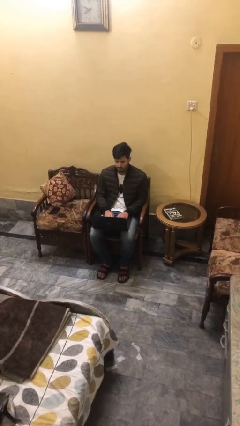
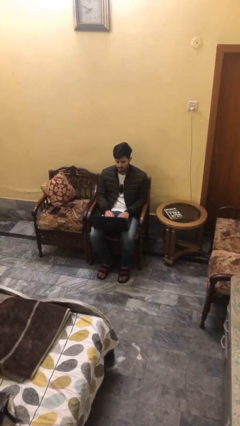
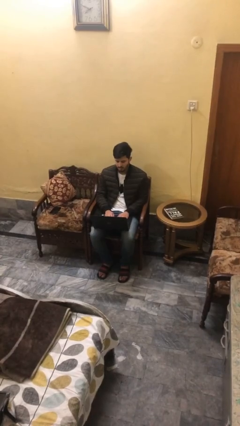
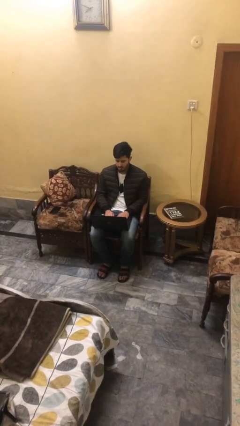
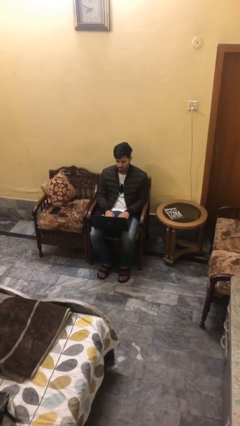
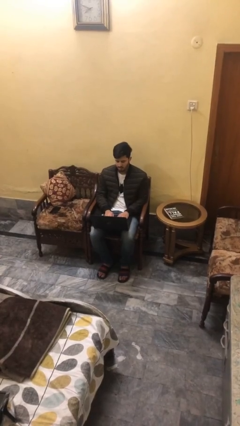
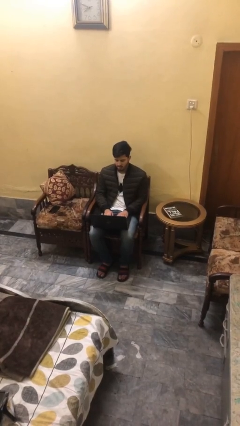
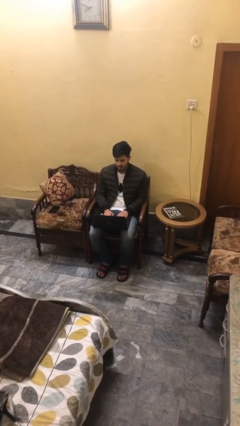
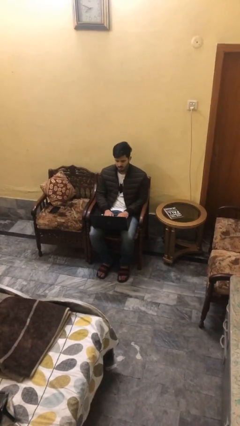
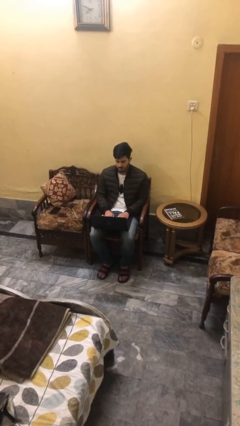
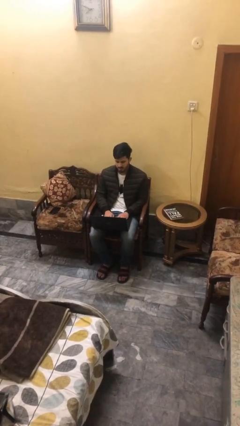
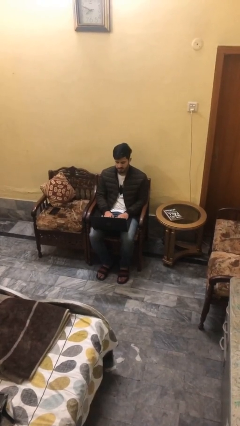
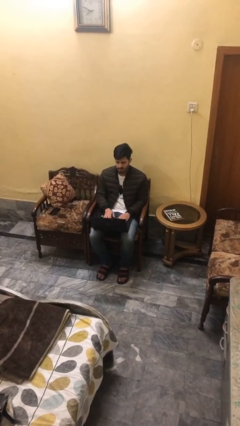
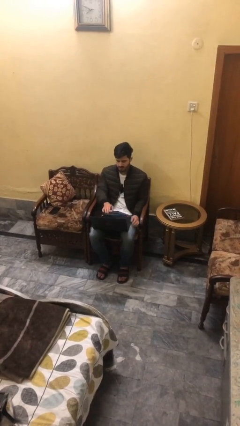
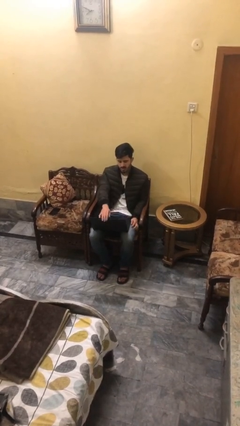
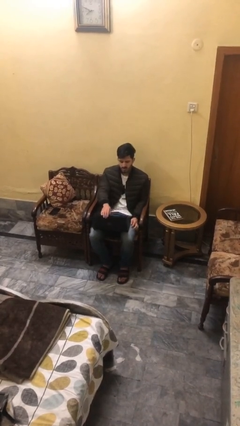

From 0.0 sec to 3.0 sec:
person interacts with laptop

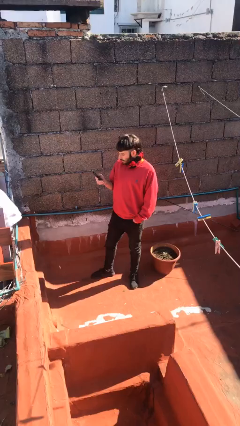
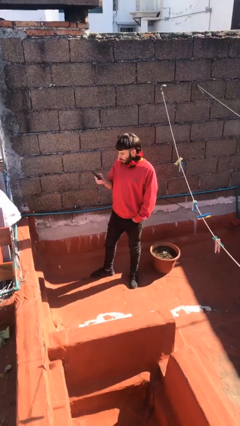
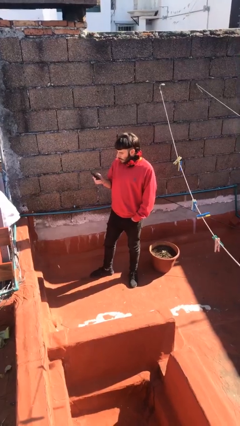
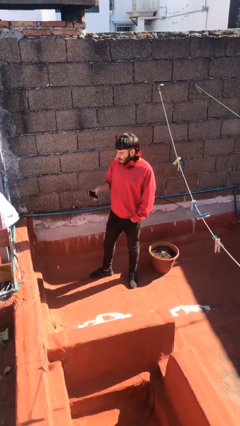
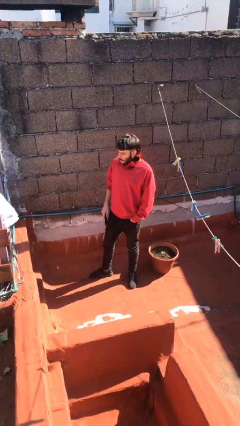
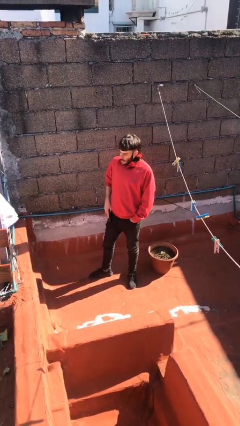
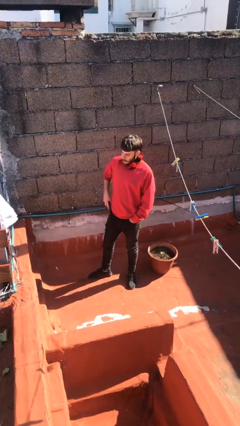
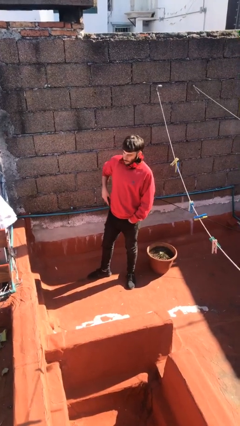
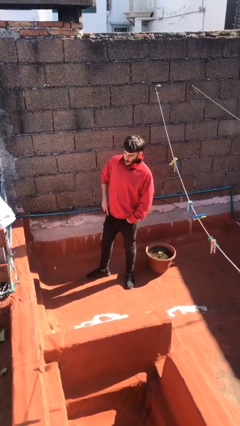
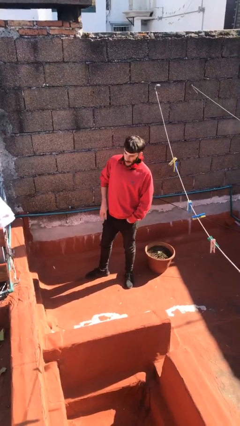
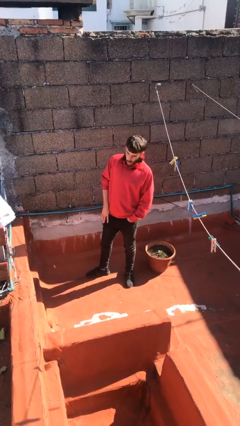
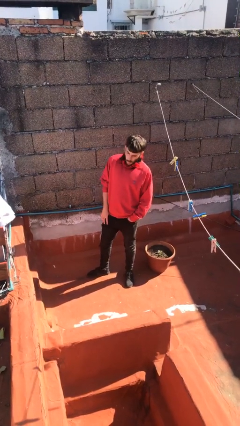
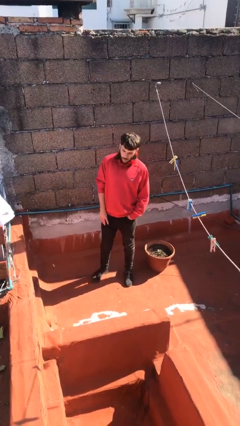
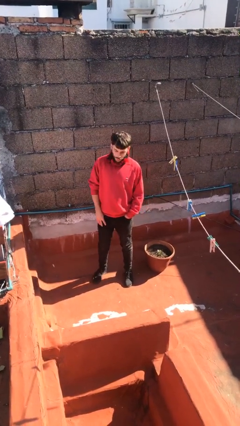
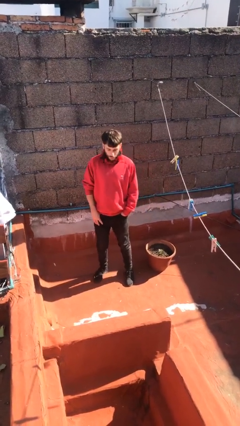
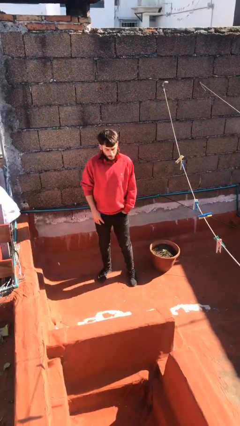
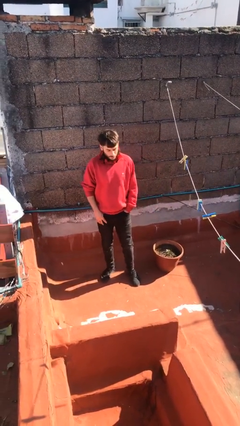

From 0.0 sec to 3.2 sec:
person puts phone into pocket

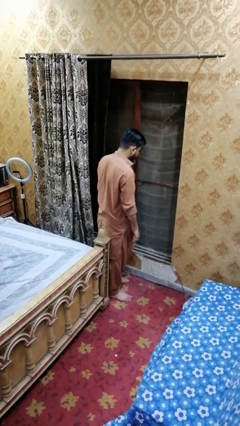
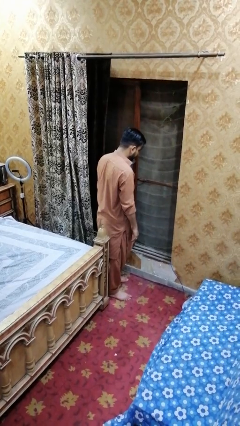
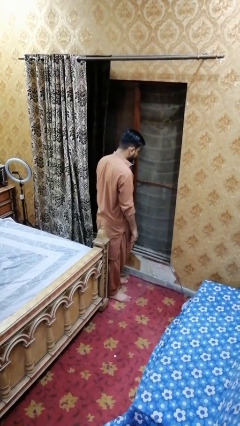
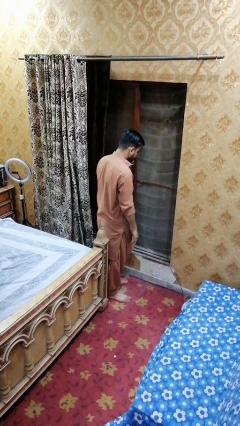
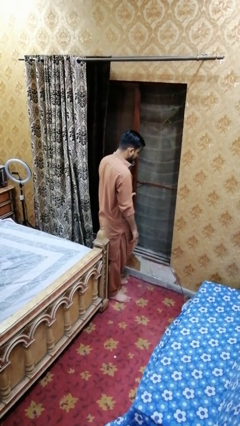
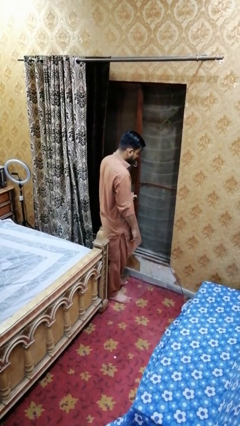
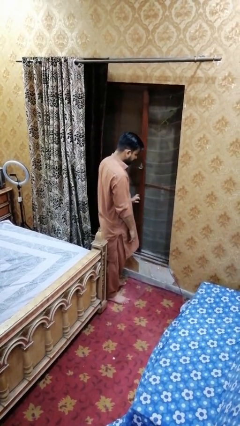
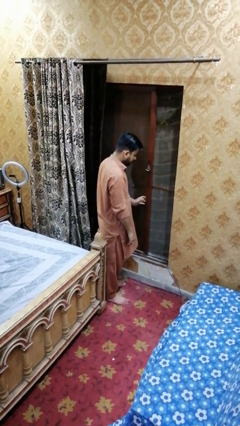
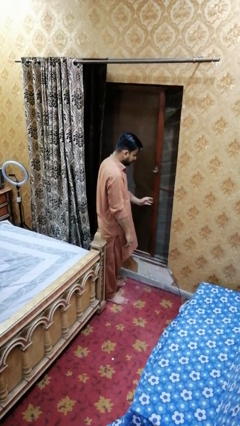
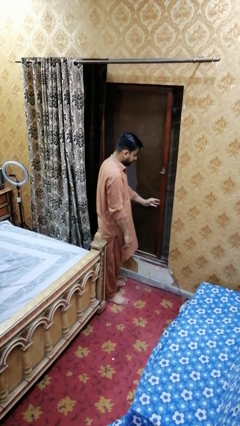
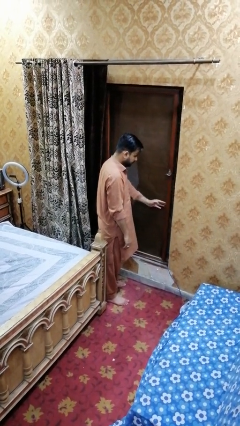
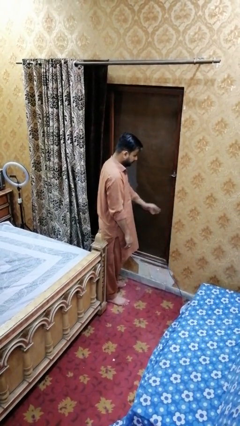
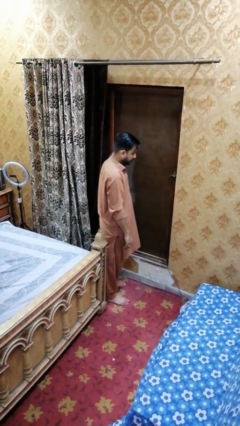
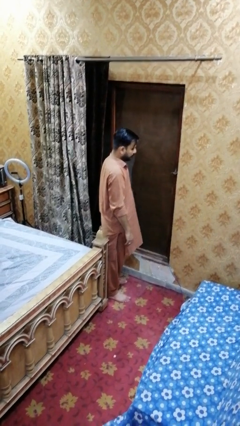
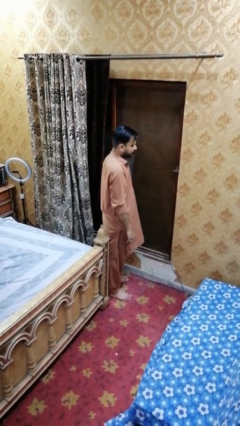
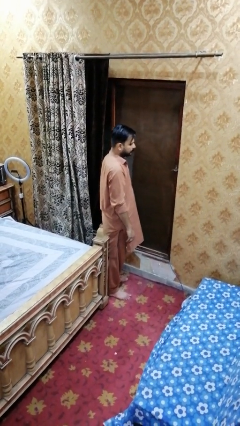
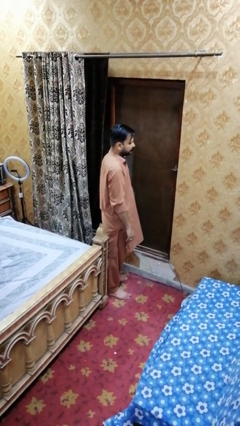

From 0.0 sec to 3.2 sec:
person closes home window

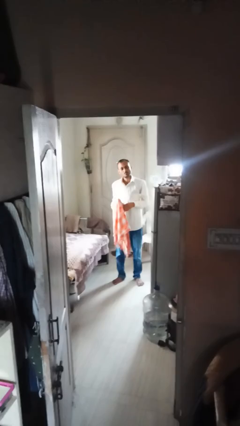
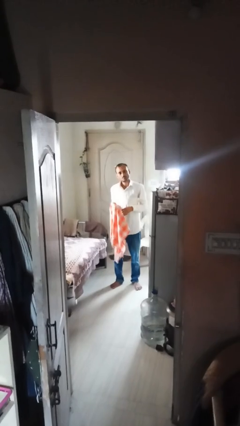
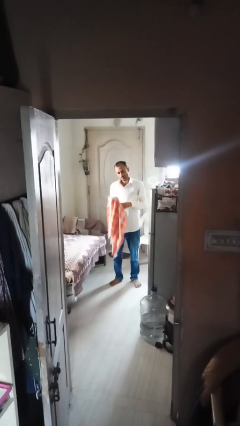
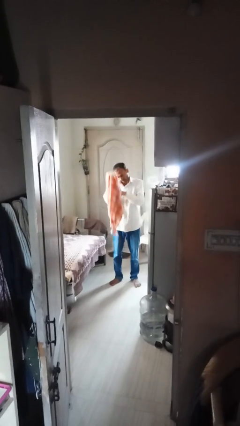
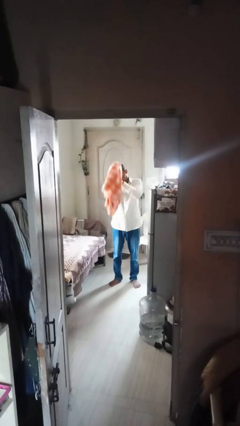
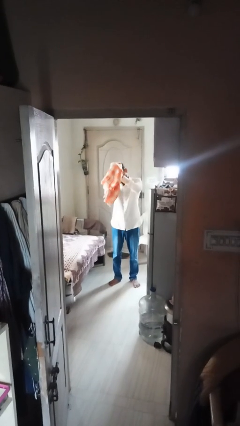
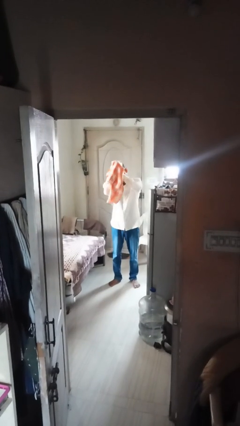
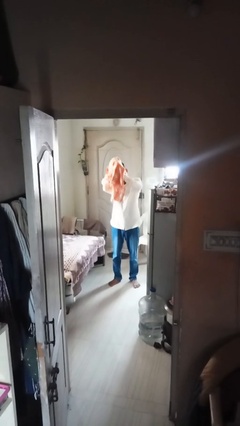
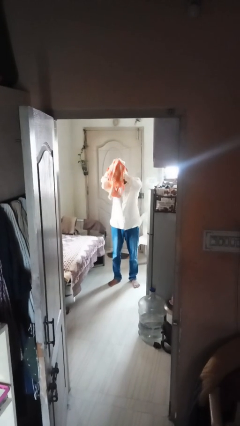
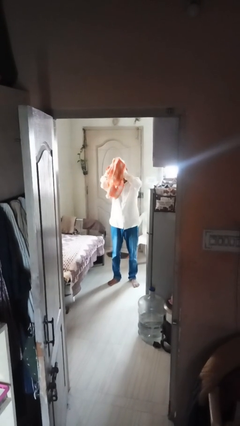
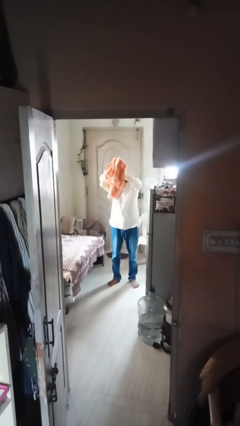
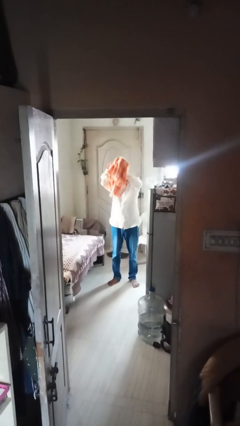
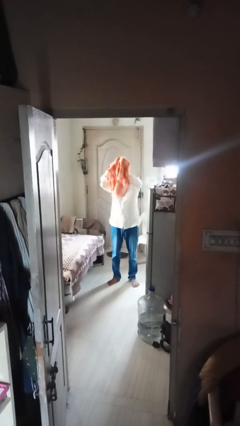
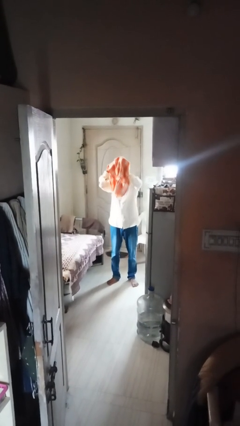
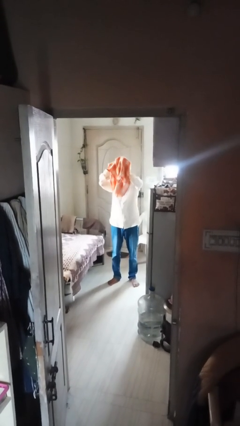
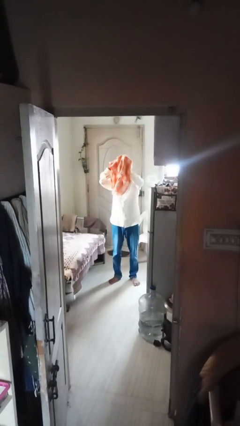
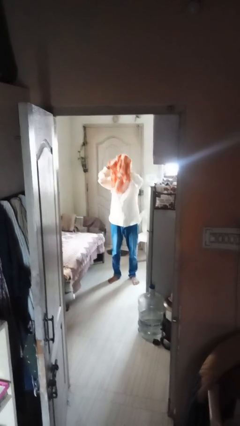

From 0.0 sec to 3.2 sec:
person dries hair with towel

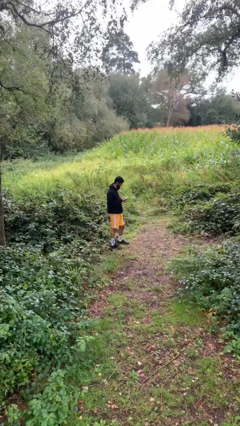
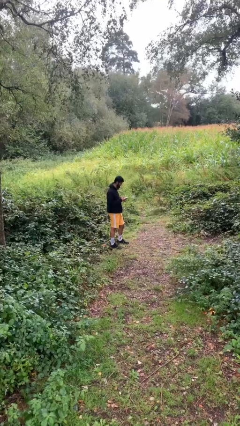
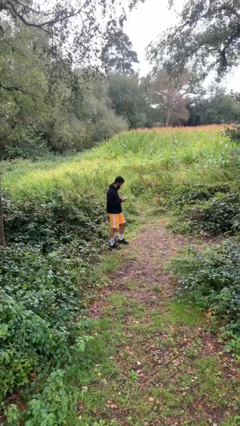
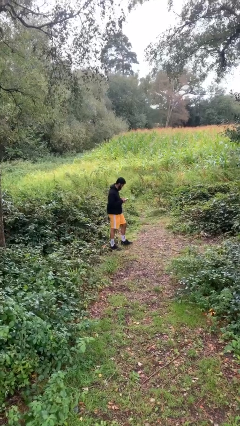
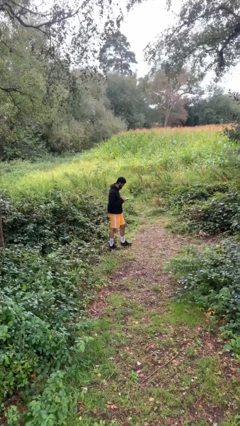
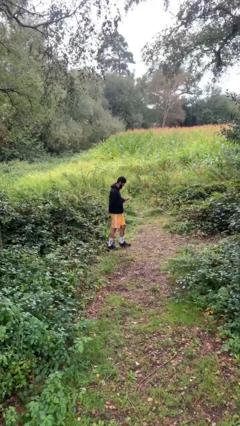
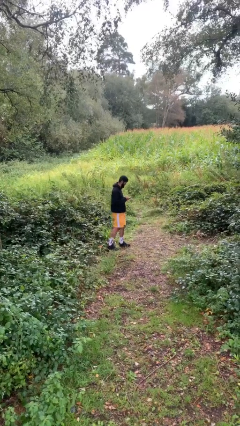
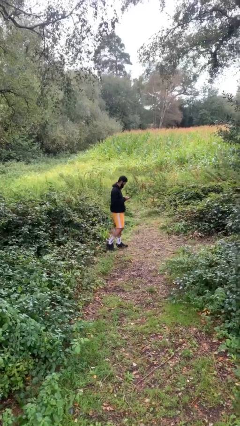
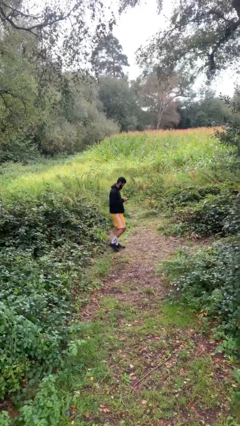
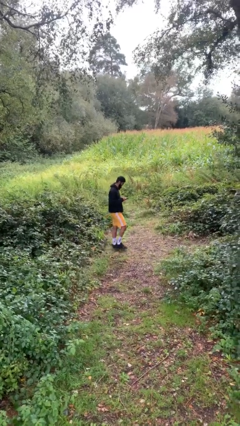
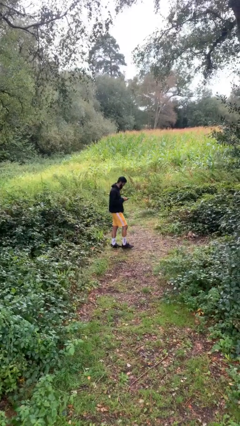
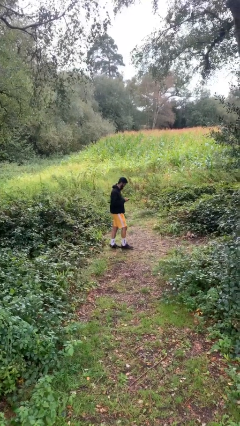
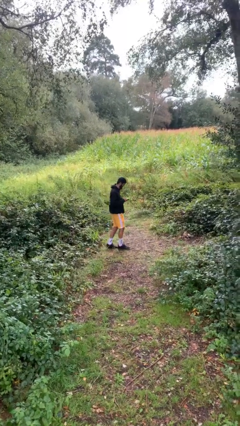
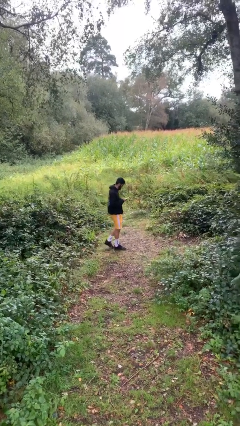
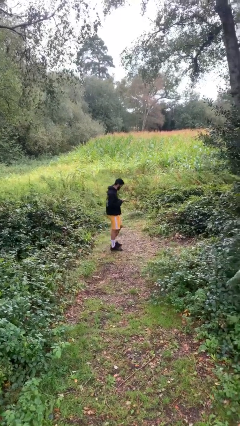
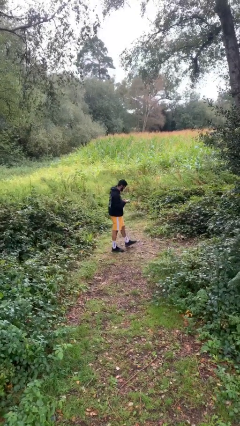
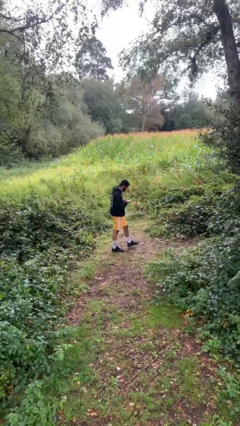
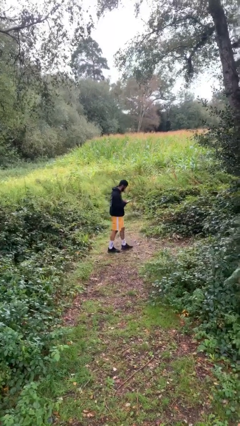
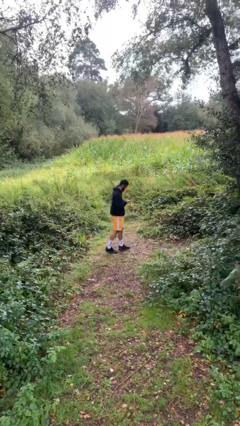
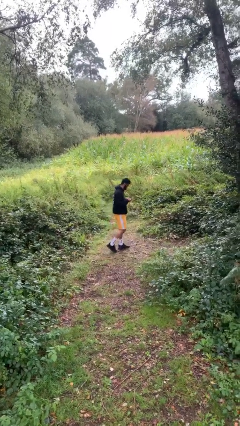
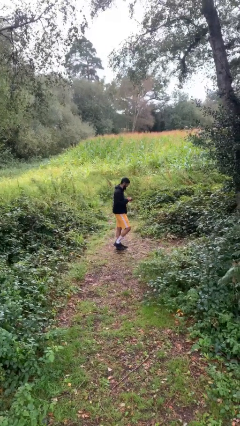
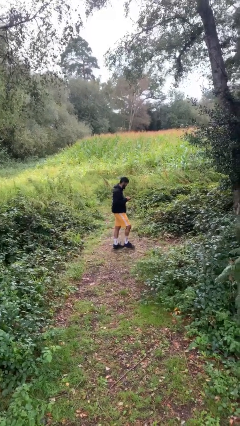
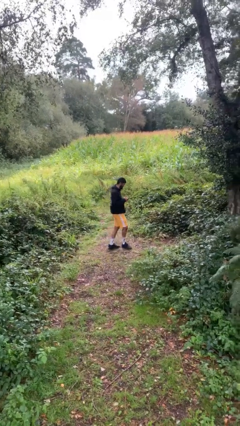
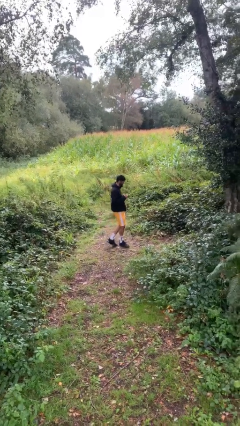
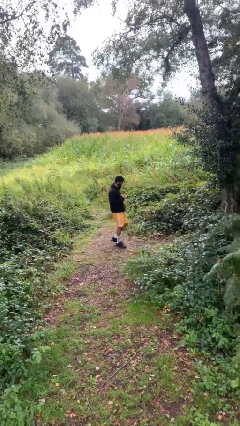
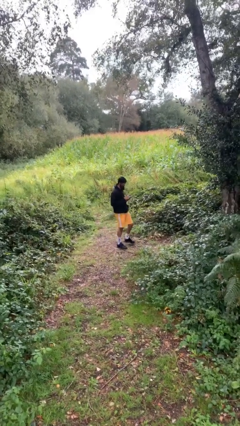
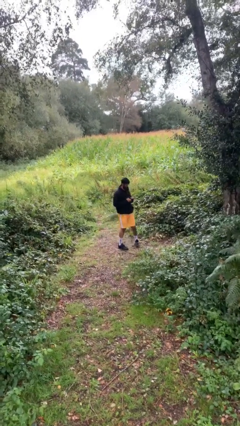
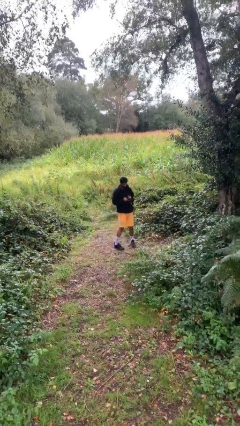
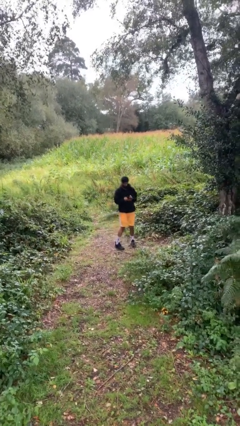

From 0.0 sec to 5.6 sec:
person texts on phone
